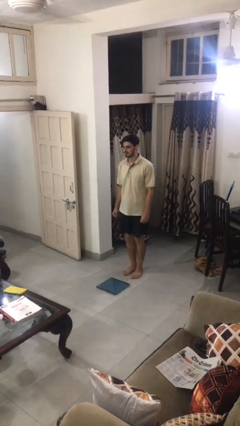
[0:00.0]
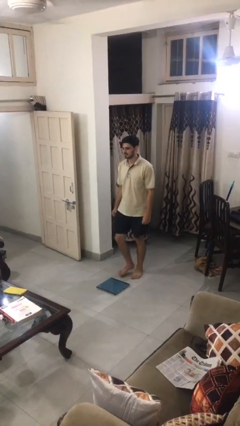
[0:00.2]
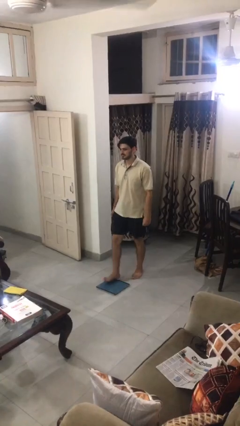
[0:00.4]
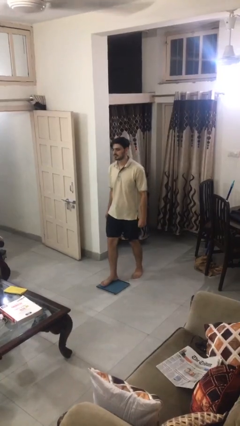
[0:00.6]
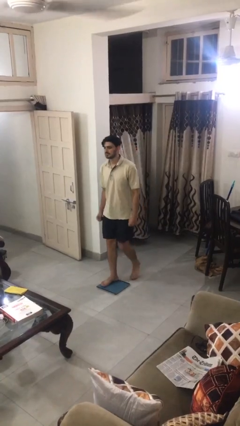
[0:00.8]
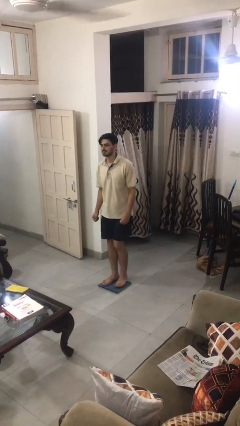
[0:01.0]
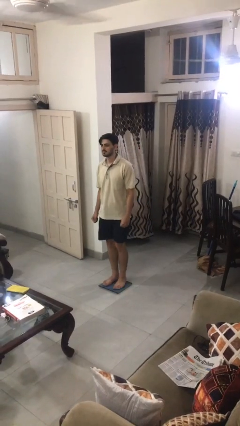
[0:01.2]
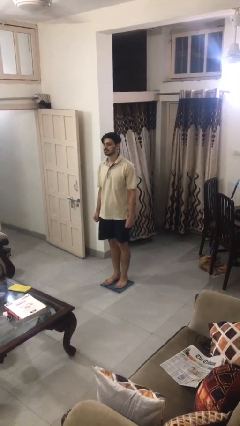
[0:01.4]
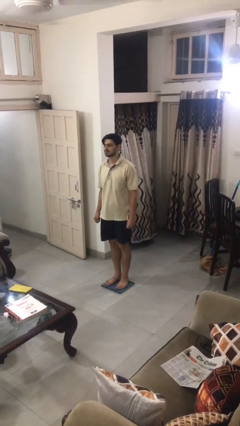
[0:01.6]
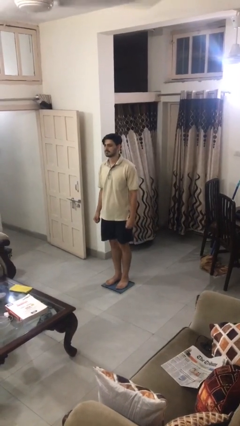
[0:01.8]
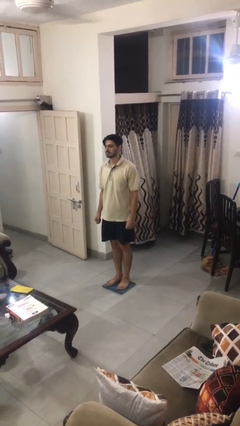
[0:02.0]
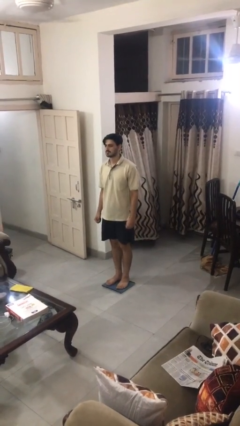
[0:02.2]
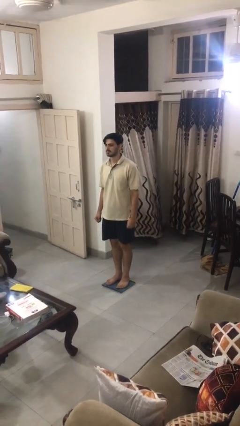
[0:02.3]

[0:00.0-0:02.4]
person uses bodyweight scale

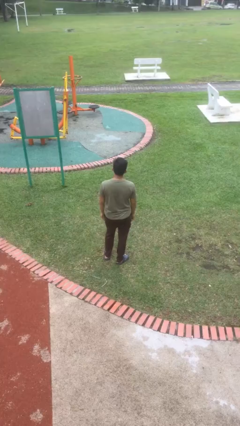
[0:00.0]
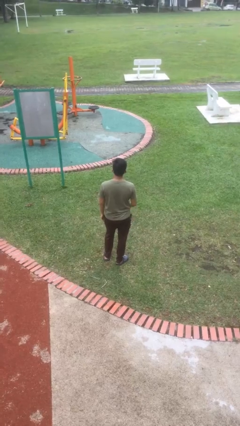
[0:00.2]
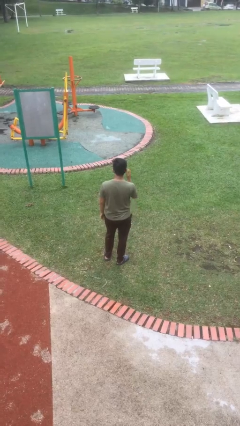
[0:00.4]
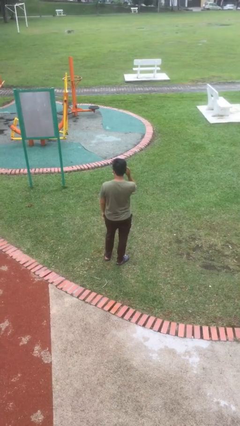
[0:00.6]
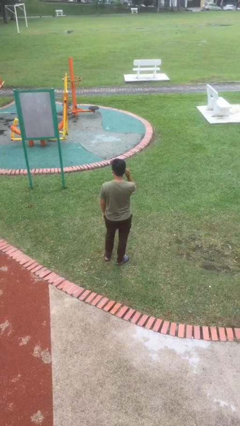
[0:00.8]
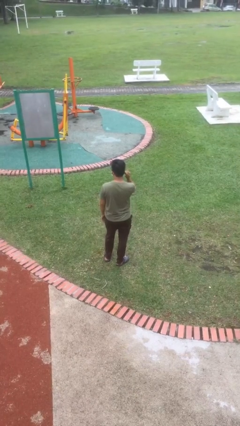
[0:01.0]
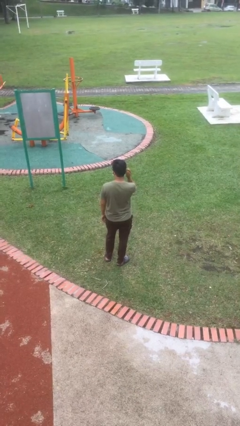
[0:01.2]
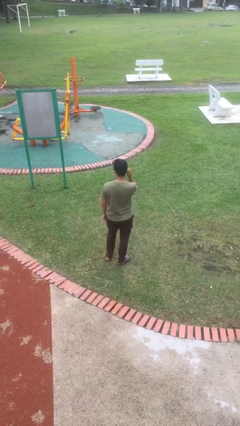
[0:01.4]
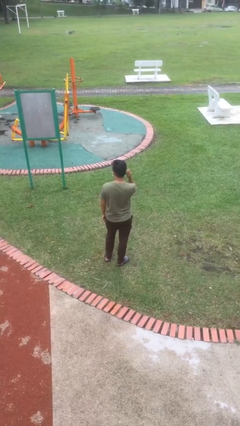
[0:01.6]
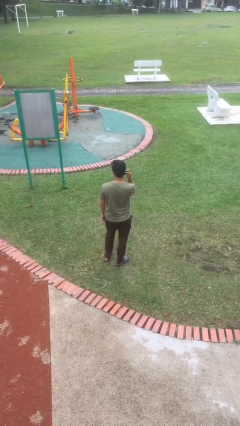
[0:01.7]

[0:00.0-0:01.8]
person touches earlobe

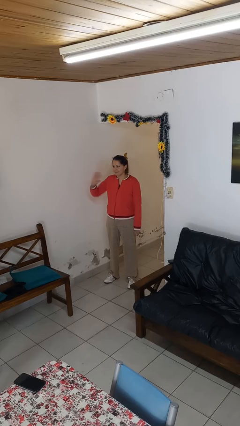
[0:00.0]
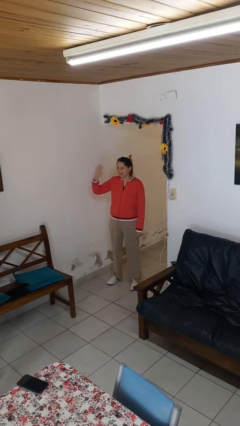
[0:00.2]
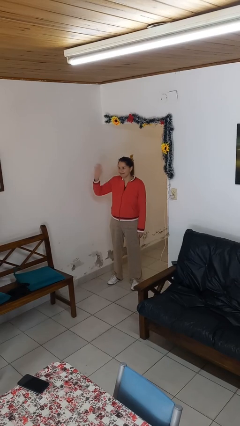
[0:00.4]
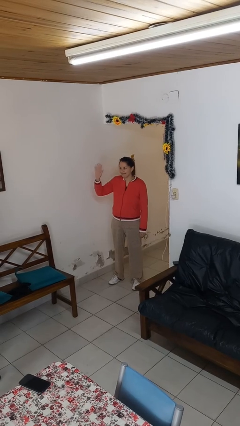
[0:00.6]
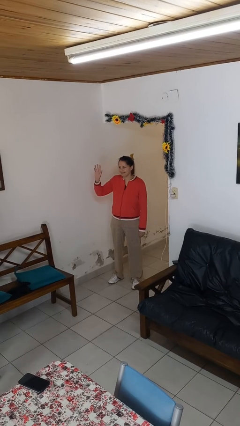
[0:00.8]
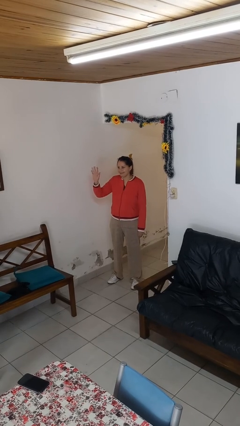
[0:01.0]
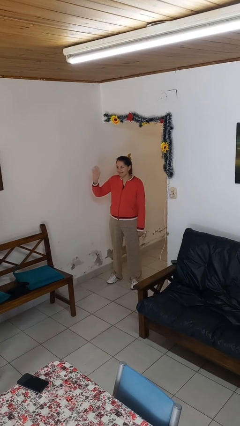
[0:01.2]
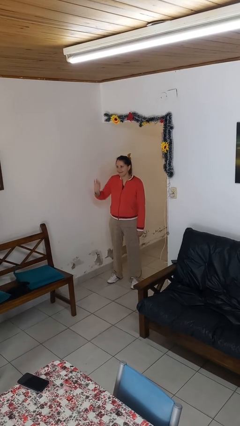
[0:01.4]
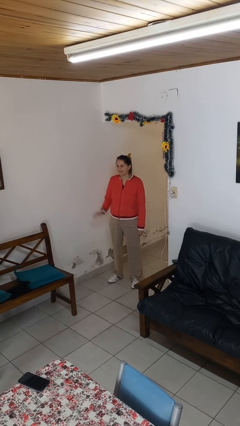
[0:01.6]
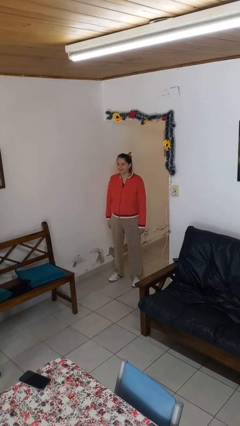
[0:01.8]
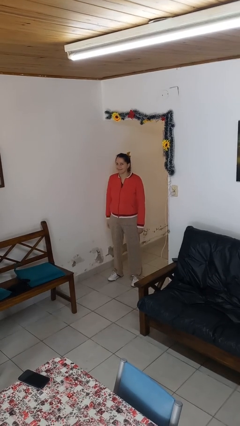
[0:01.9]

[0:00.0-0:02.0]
person waves at person

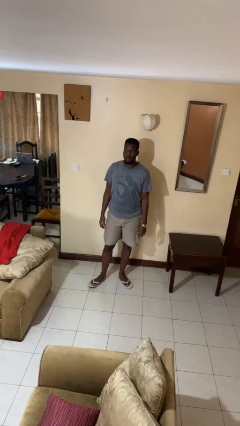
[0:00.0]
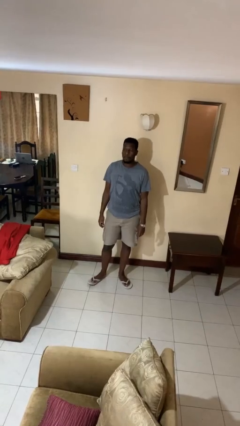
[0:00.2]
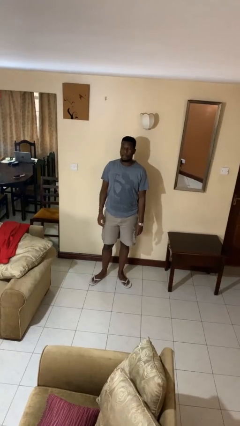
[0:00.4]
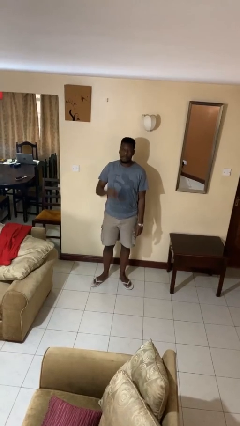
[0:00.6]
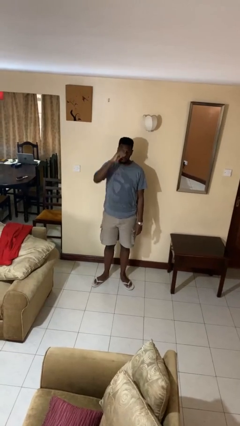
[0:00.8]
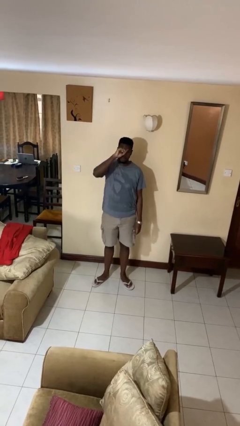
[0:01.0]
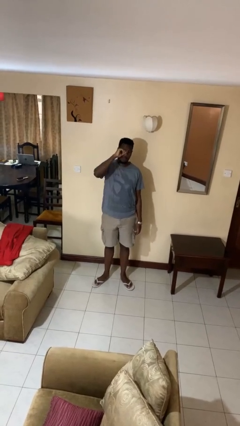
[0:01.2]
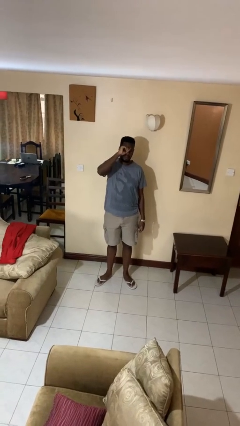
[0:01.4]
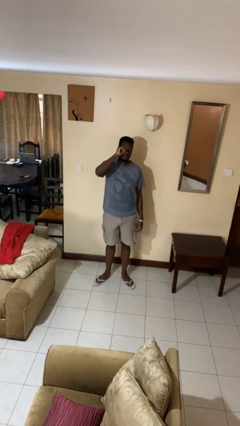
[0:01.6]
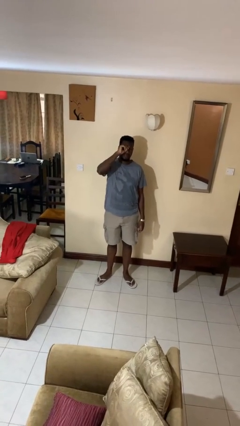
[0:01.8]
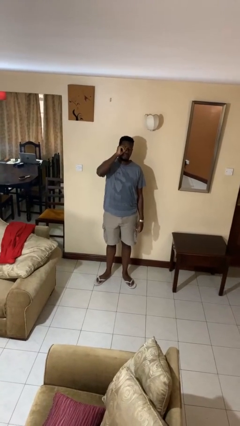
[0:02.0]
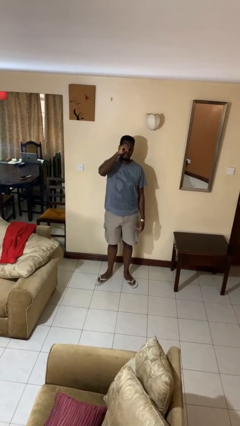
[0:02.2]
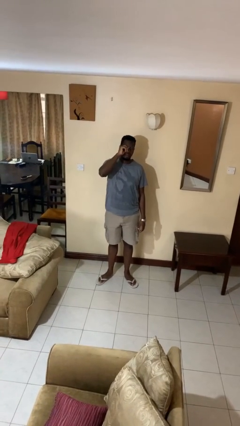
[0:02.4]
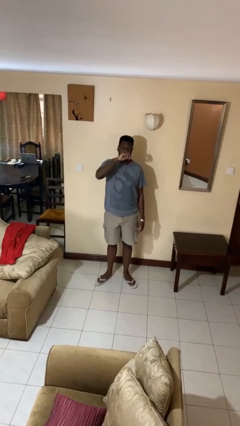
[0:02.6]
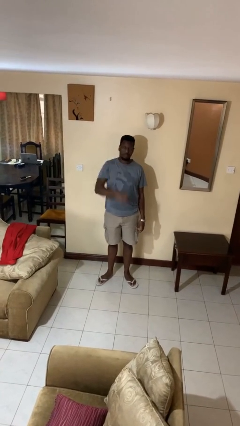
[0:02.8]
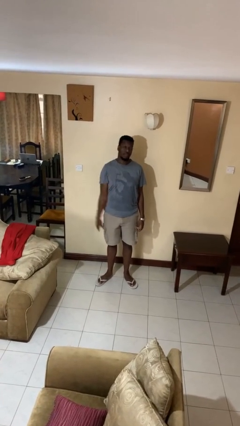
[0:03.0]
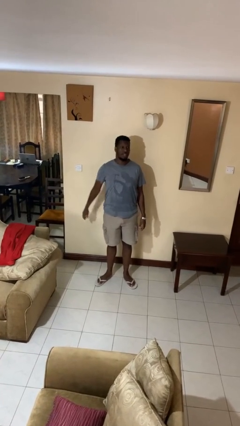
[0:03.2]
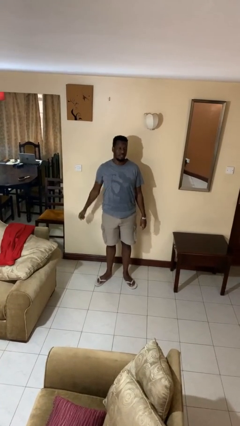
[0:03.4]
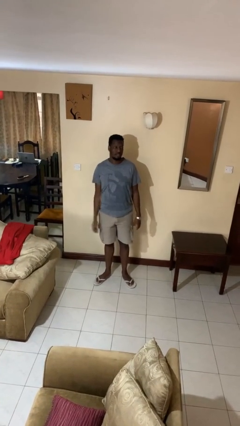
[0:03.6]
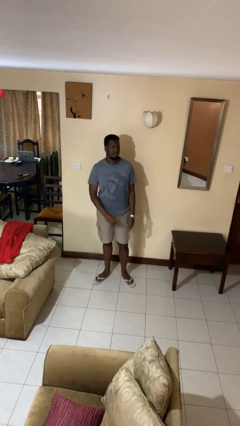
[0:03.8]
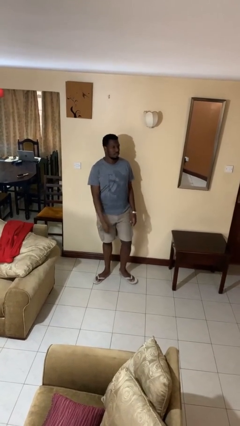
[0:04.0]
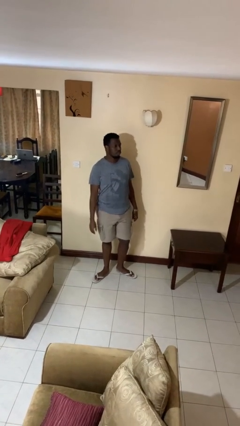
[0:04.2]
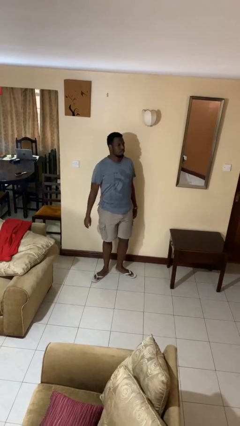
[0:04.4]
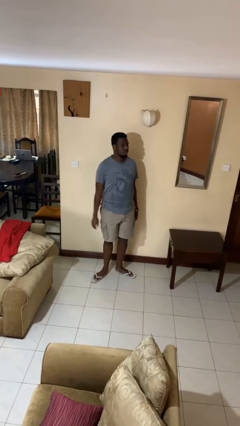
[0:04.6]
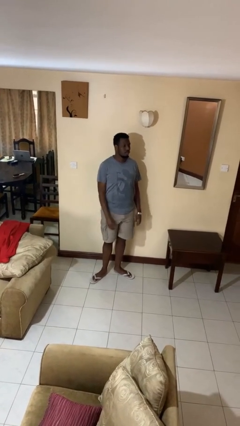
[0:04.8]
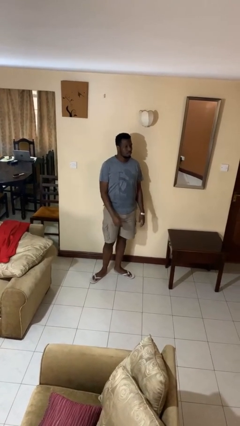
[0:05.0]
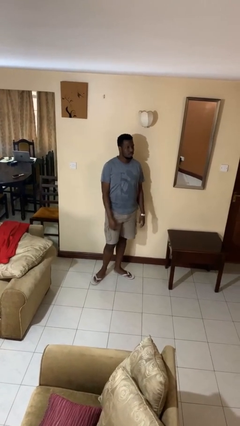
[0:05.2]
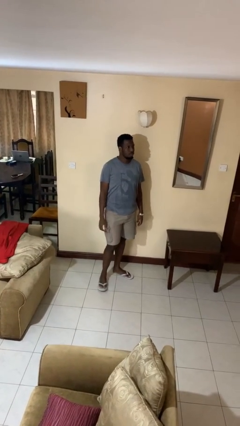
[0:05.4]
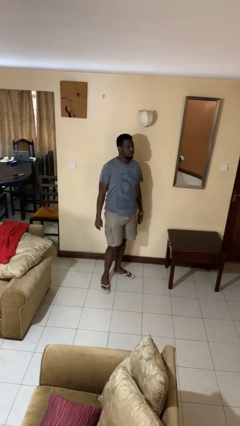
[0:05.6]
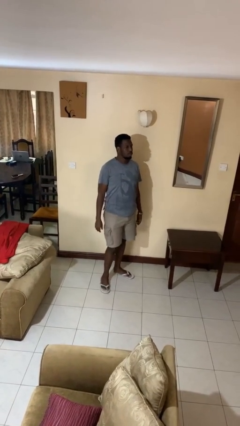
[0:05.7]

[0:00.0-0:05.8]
person rubs eyes

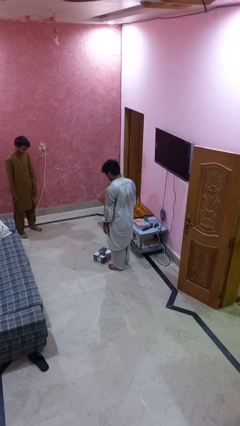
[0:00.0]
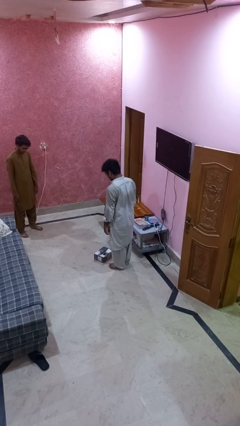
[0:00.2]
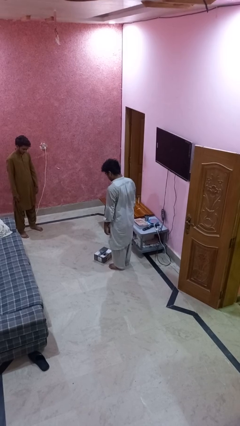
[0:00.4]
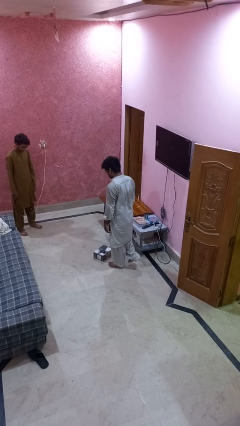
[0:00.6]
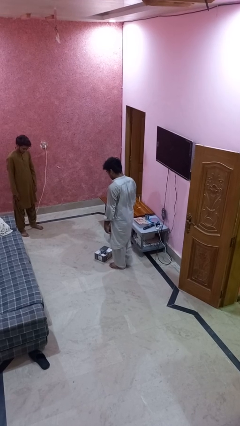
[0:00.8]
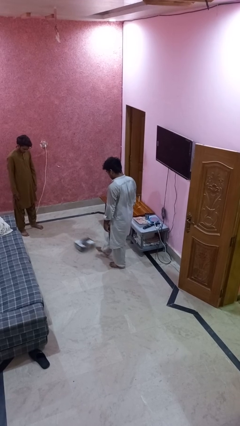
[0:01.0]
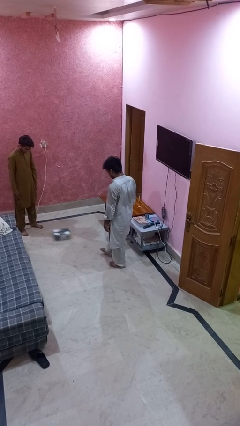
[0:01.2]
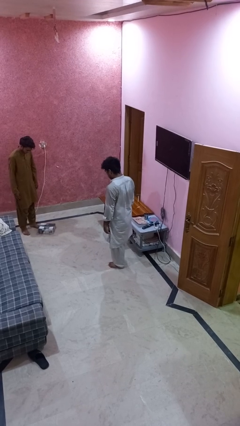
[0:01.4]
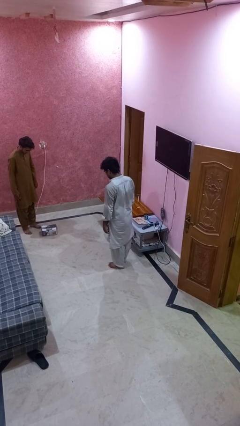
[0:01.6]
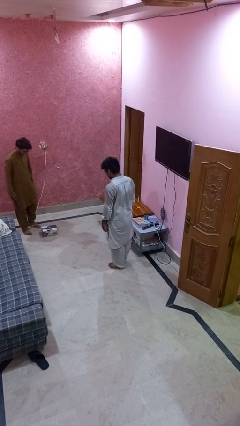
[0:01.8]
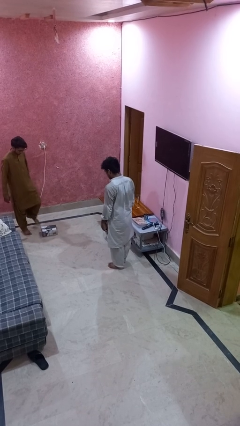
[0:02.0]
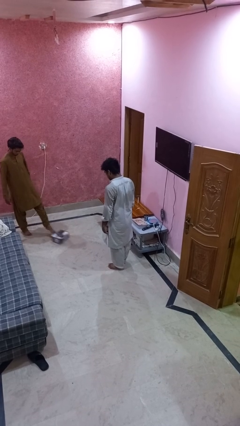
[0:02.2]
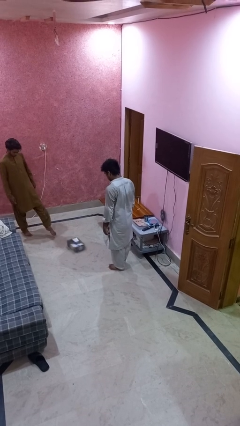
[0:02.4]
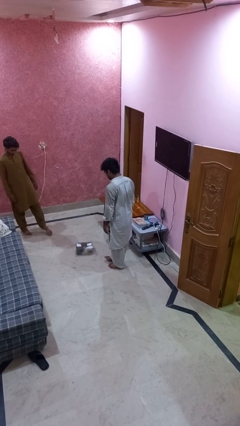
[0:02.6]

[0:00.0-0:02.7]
person kicks object to person

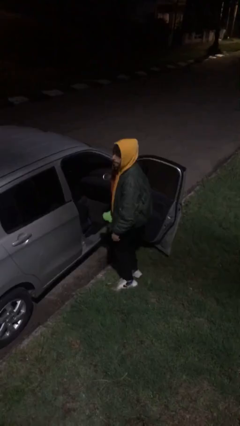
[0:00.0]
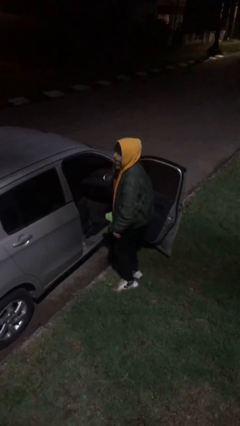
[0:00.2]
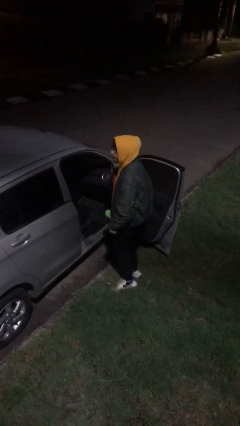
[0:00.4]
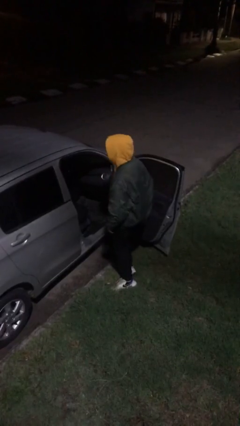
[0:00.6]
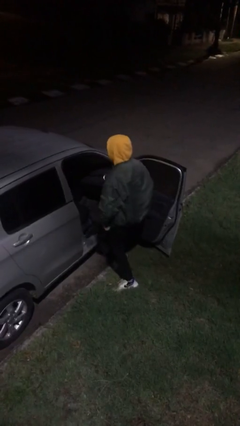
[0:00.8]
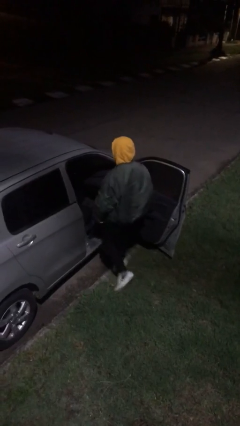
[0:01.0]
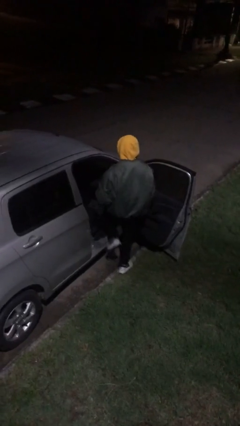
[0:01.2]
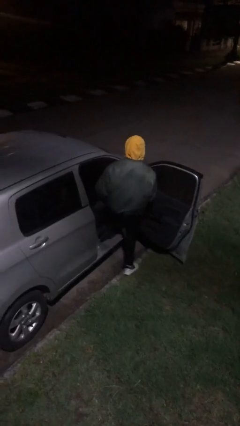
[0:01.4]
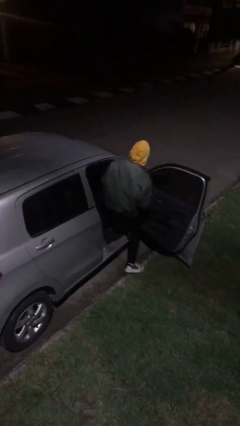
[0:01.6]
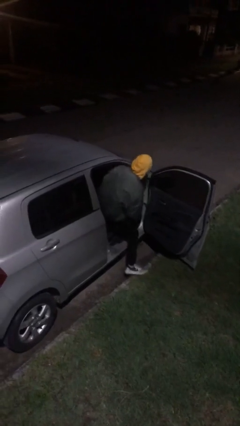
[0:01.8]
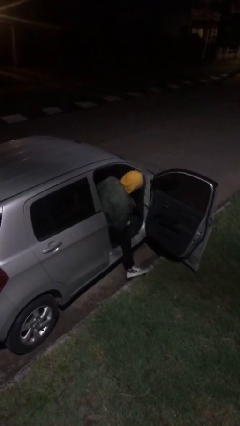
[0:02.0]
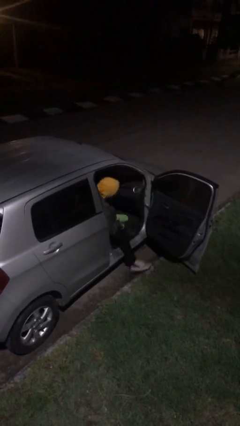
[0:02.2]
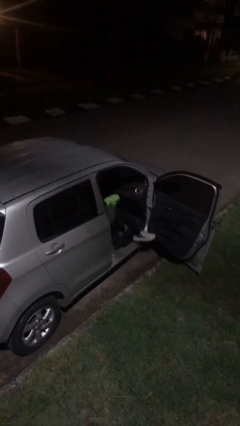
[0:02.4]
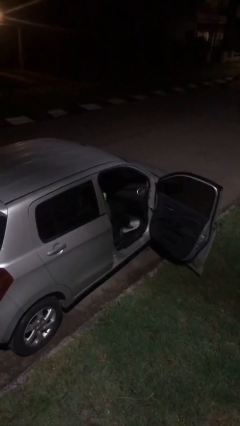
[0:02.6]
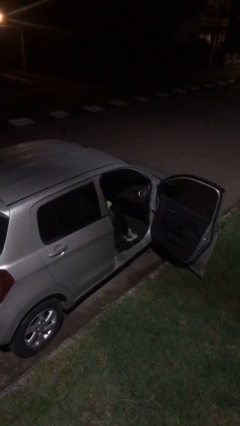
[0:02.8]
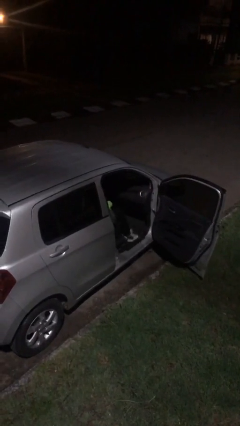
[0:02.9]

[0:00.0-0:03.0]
person enters car
